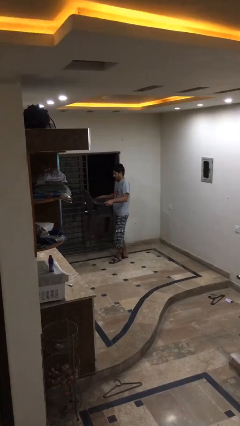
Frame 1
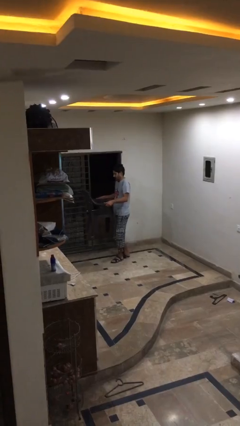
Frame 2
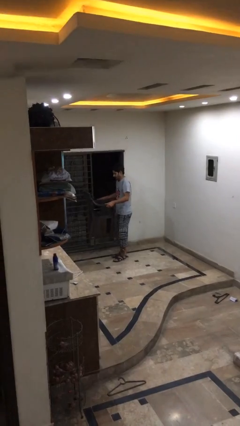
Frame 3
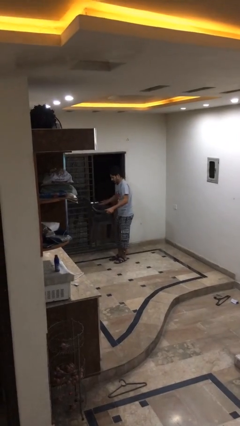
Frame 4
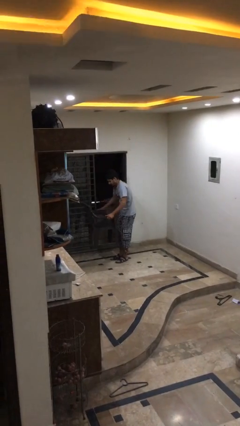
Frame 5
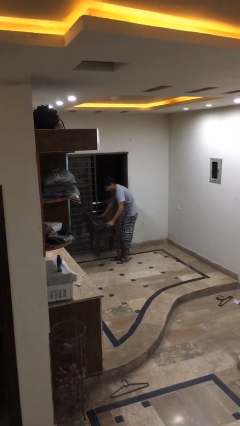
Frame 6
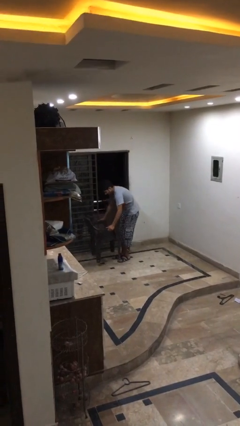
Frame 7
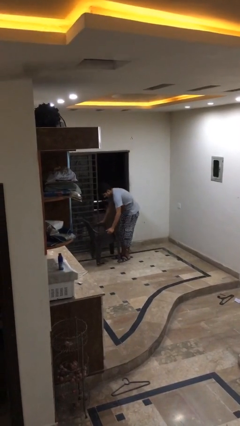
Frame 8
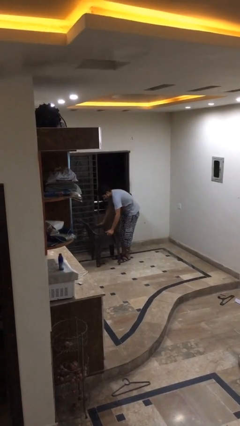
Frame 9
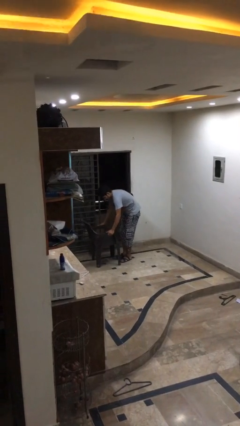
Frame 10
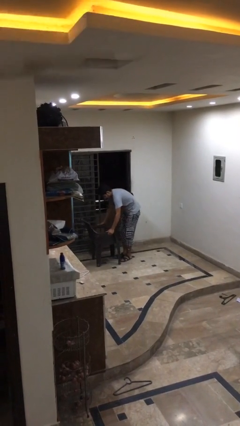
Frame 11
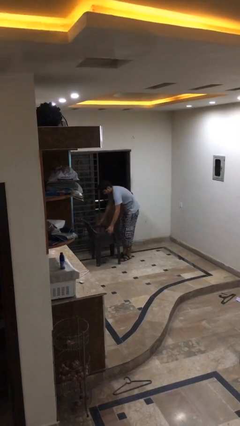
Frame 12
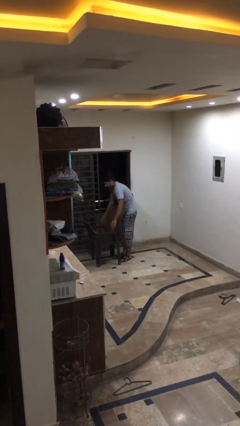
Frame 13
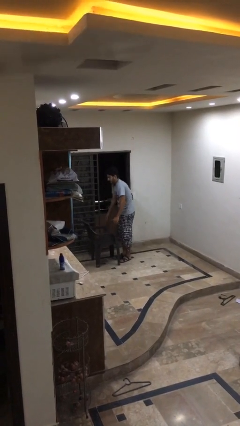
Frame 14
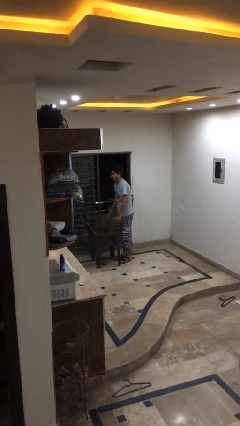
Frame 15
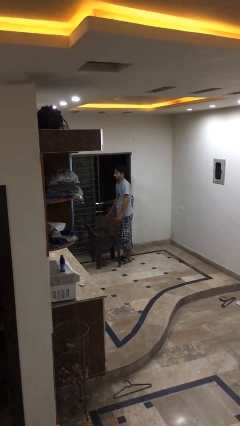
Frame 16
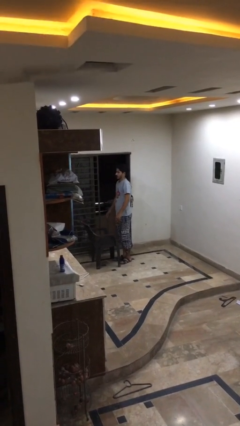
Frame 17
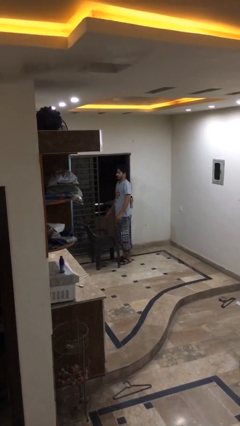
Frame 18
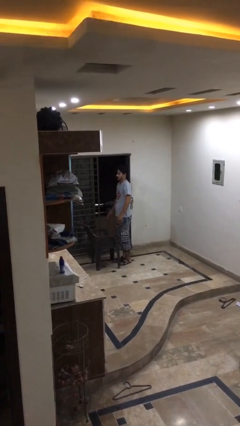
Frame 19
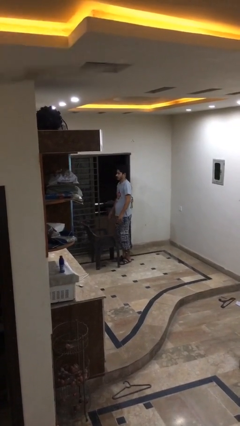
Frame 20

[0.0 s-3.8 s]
person puts down object on floor

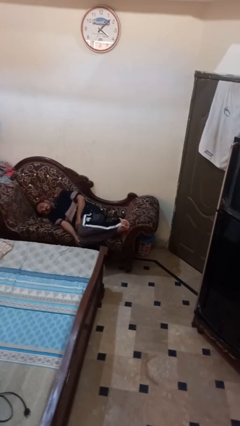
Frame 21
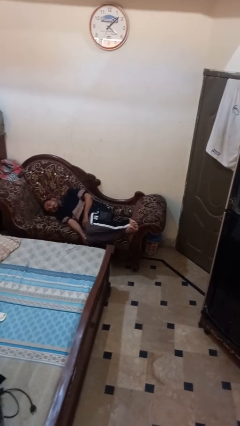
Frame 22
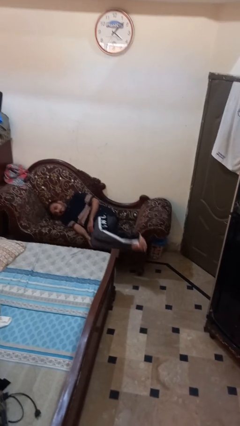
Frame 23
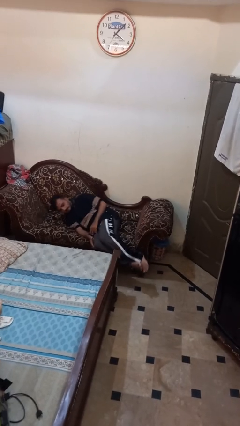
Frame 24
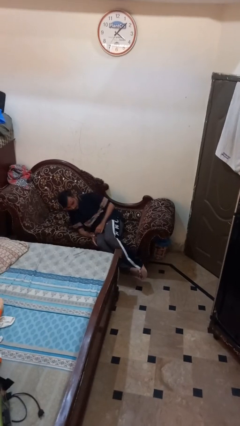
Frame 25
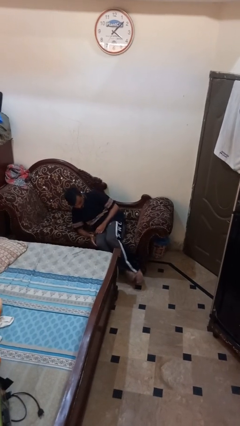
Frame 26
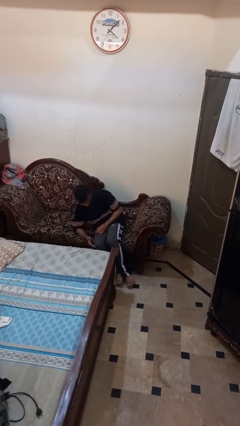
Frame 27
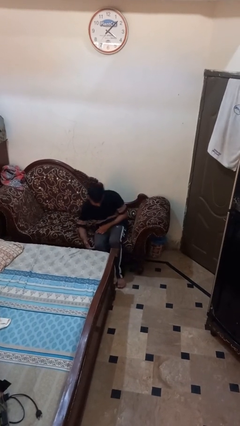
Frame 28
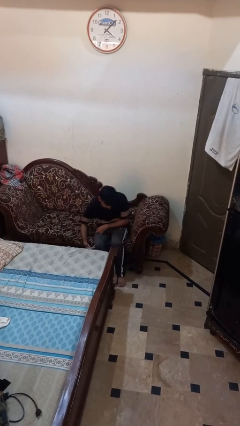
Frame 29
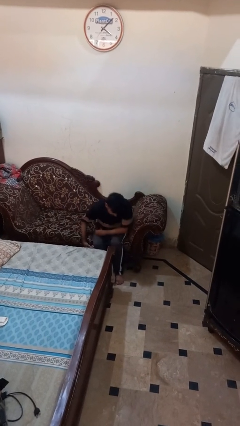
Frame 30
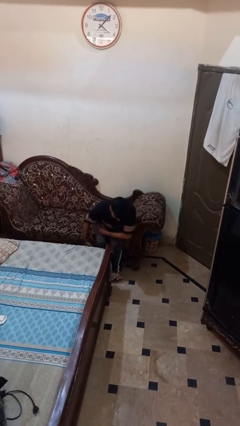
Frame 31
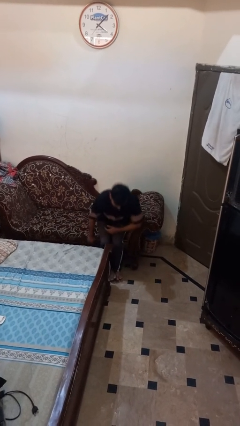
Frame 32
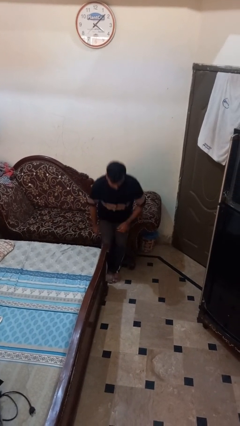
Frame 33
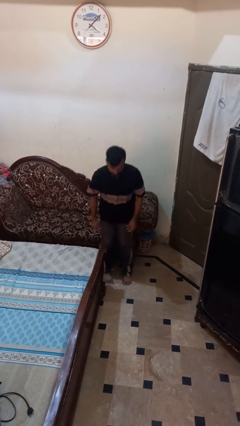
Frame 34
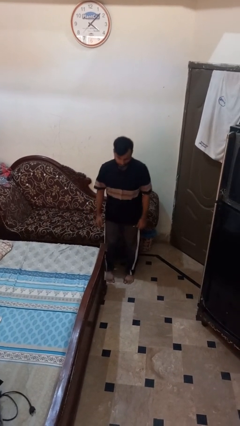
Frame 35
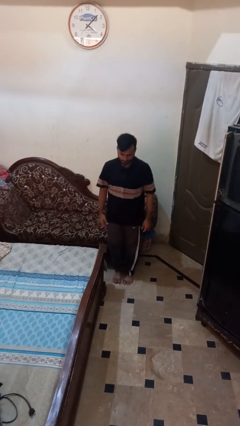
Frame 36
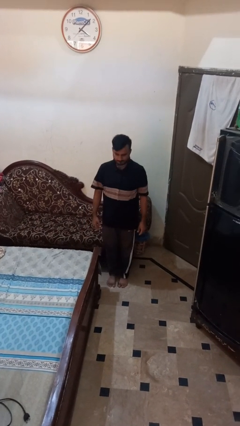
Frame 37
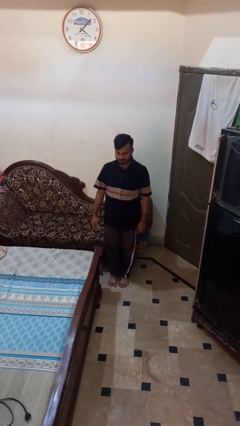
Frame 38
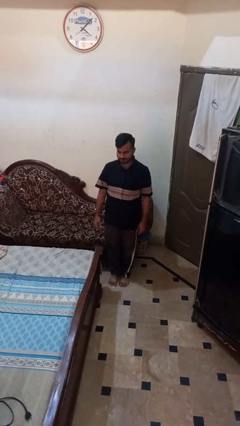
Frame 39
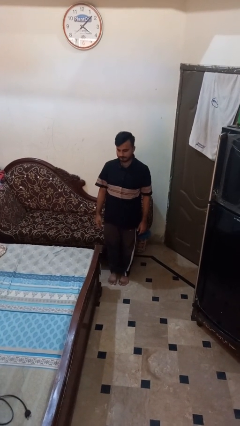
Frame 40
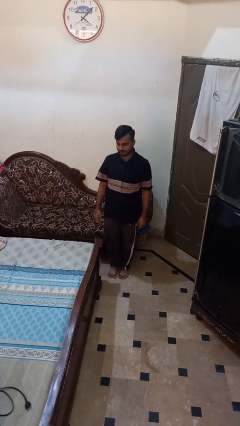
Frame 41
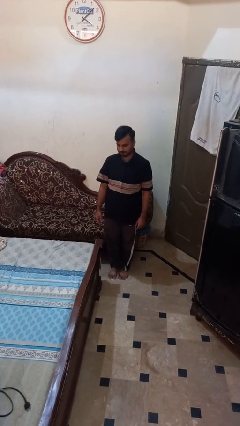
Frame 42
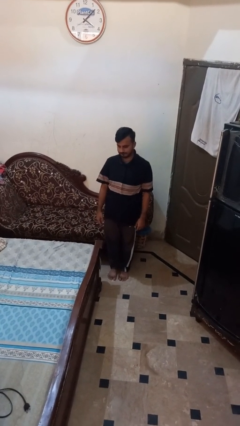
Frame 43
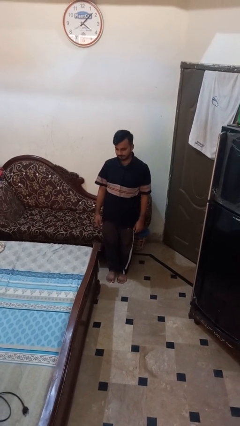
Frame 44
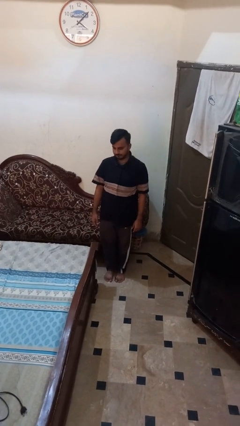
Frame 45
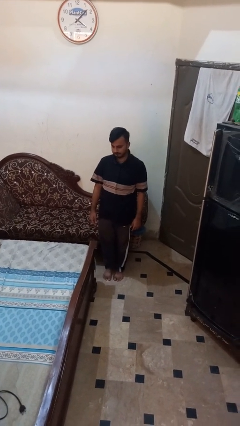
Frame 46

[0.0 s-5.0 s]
person stands up

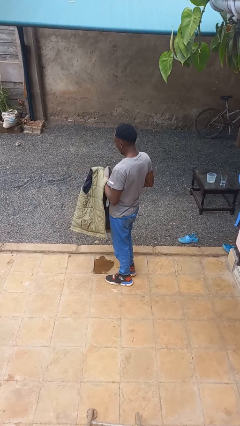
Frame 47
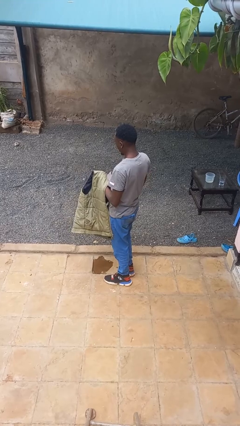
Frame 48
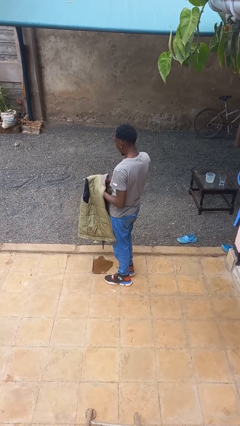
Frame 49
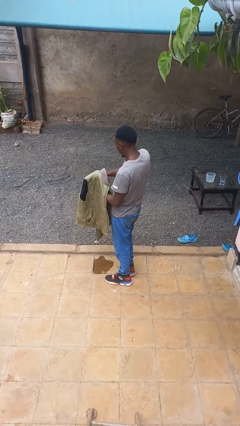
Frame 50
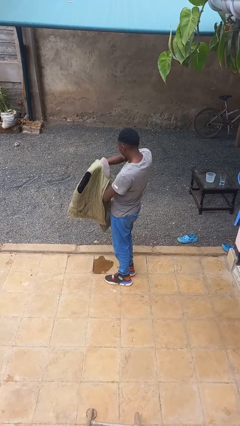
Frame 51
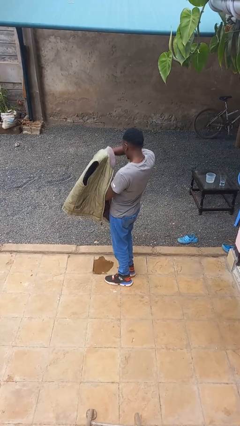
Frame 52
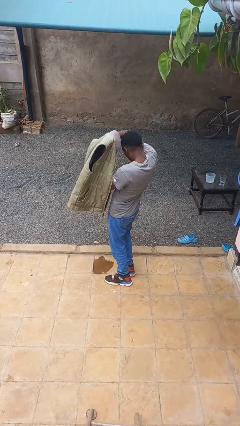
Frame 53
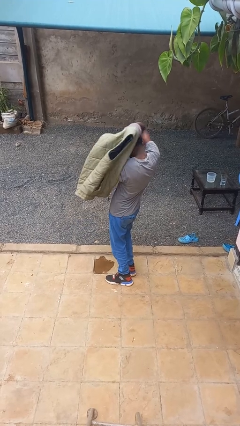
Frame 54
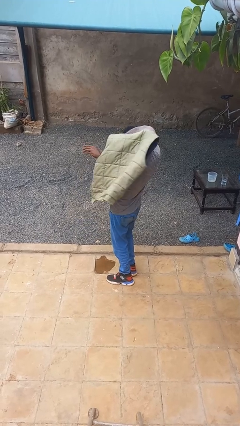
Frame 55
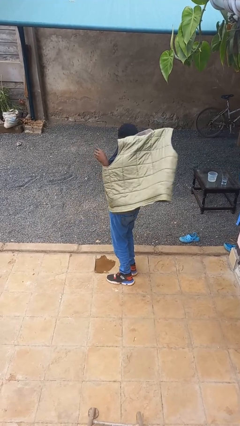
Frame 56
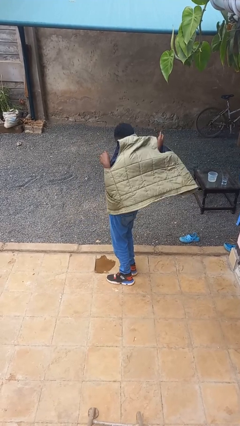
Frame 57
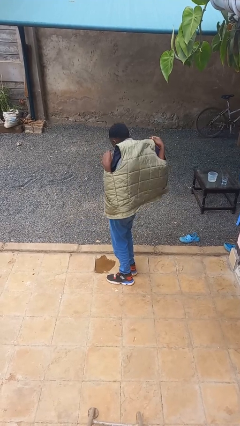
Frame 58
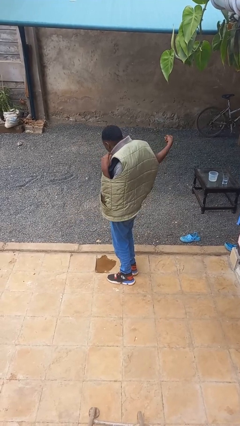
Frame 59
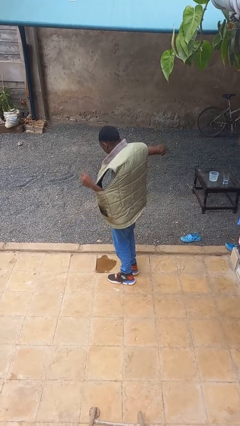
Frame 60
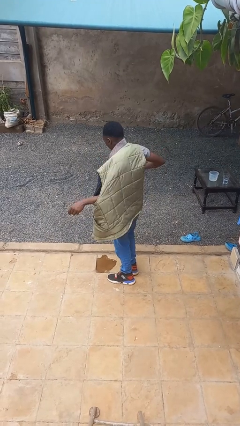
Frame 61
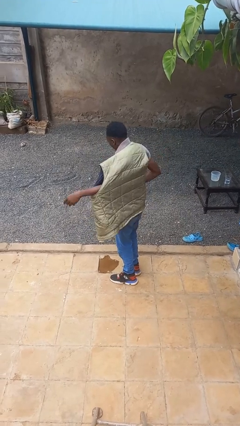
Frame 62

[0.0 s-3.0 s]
person puts on jacket

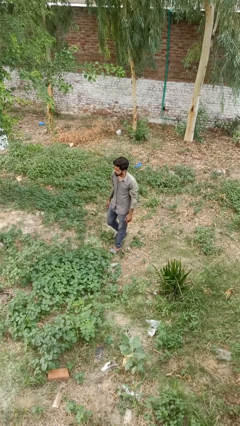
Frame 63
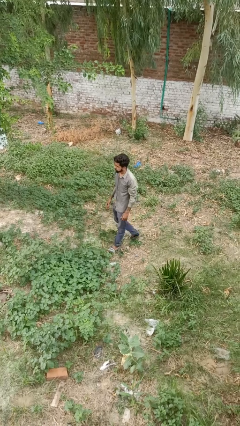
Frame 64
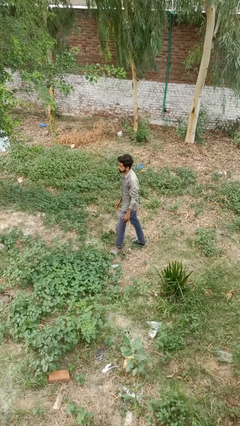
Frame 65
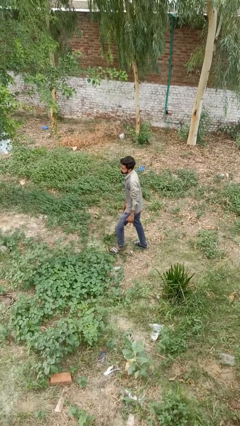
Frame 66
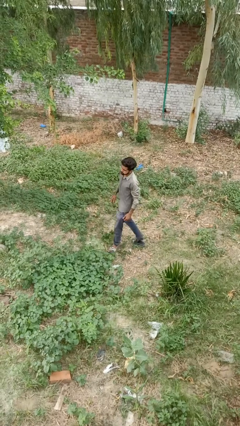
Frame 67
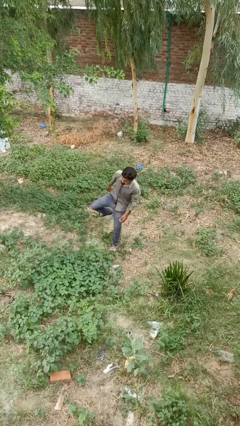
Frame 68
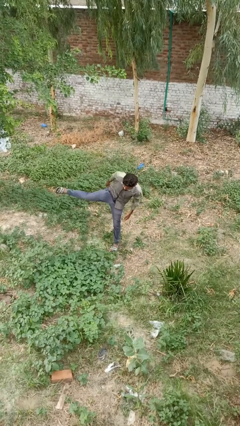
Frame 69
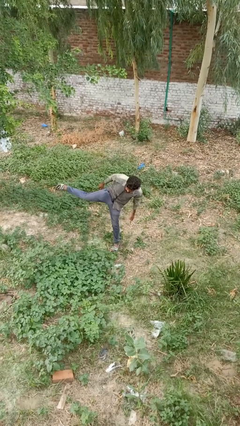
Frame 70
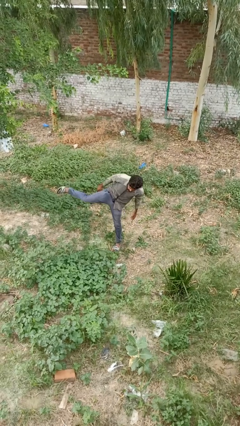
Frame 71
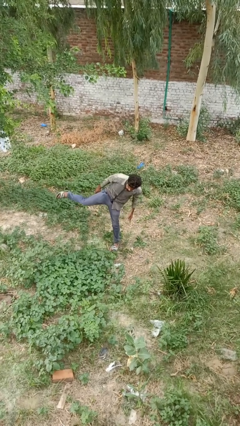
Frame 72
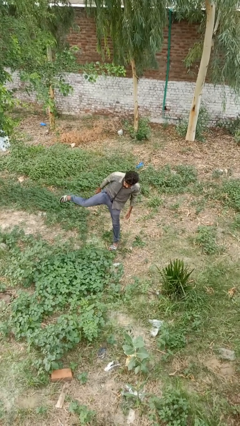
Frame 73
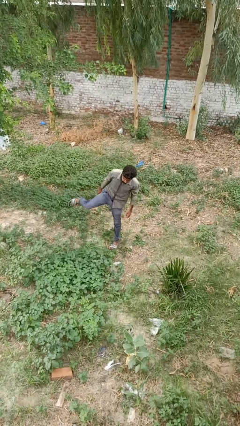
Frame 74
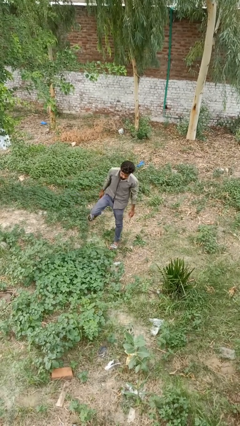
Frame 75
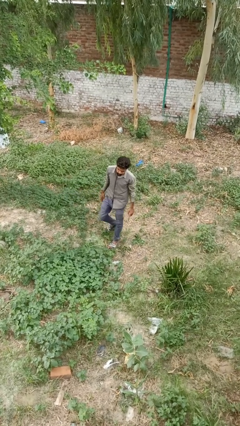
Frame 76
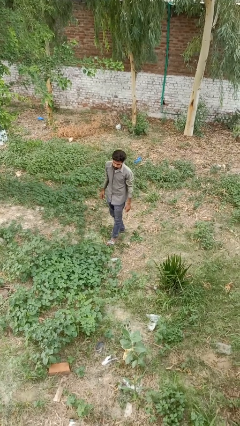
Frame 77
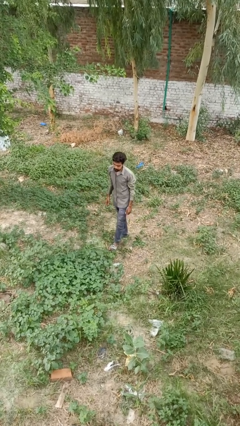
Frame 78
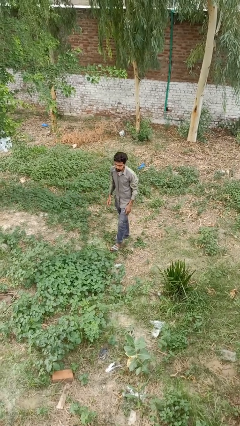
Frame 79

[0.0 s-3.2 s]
person karate kicks

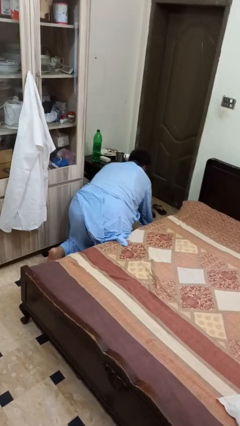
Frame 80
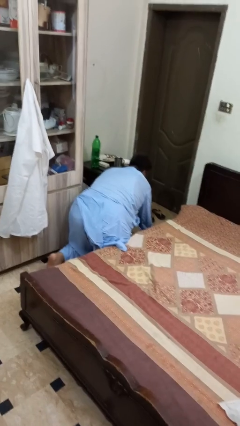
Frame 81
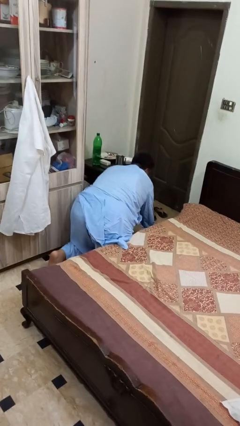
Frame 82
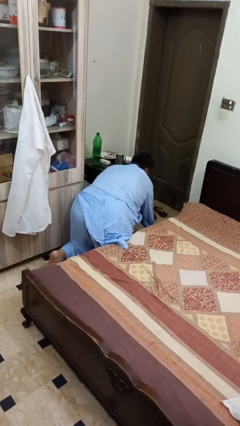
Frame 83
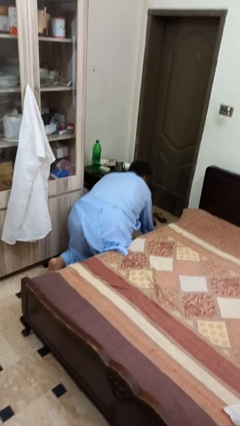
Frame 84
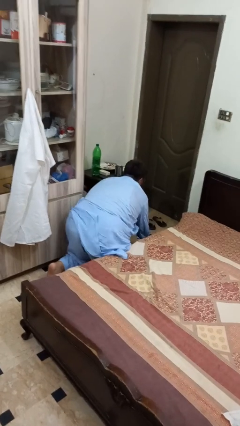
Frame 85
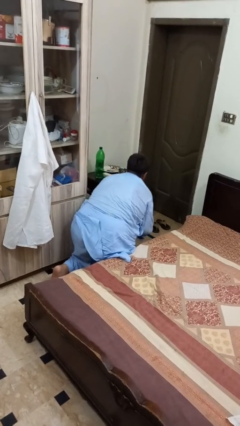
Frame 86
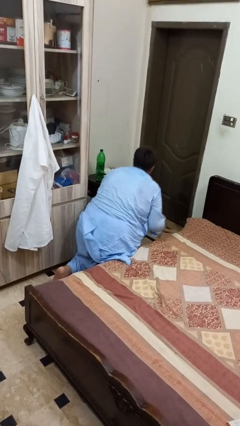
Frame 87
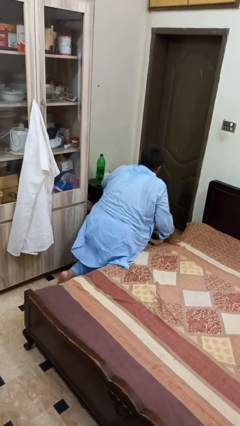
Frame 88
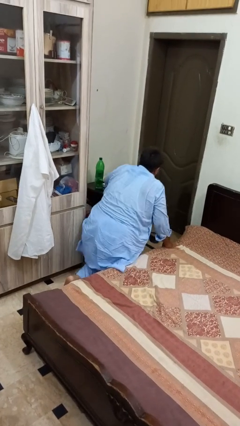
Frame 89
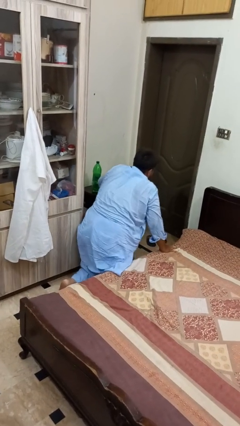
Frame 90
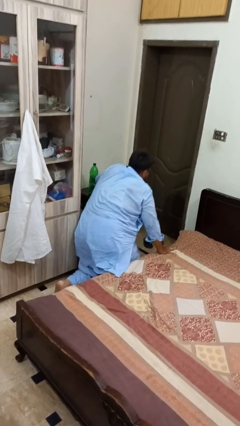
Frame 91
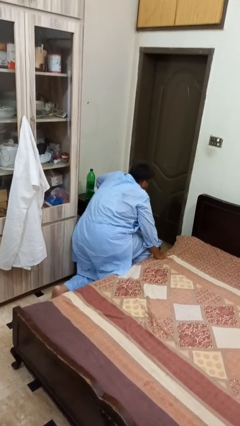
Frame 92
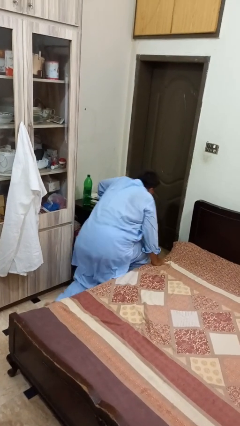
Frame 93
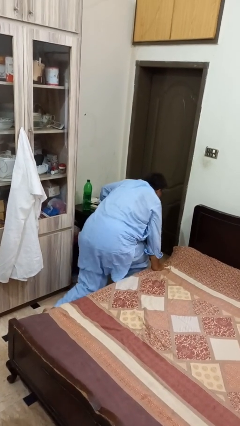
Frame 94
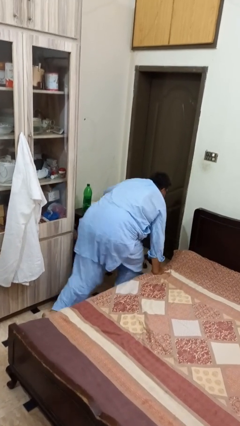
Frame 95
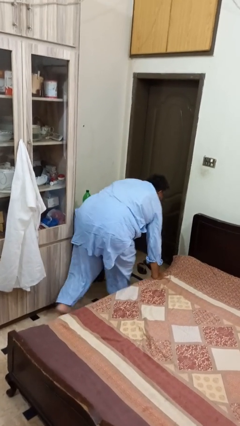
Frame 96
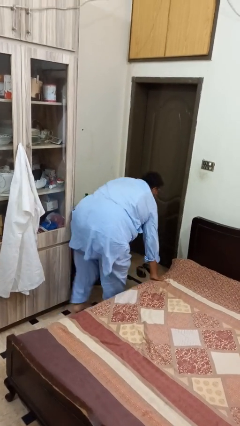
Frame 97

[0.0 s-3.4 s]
person stands up from floor
